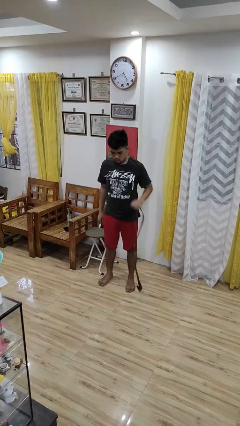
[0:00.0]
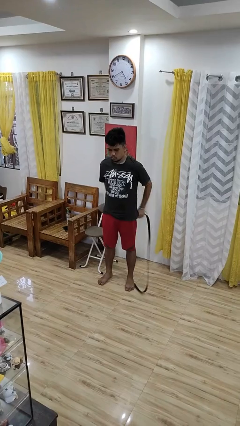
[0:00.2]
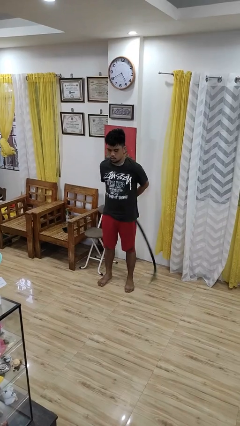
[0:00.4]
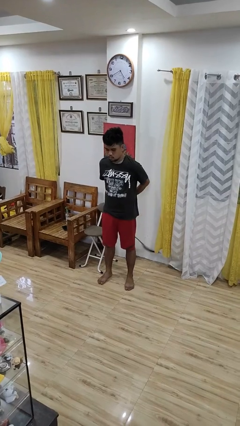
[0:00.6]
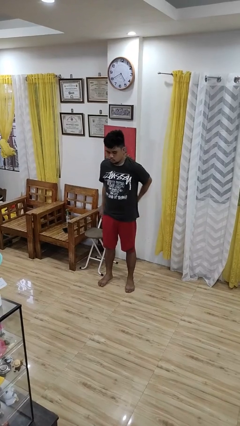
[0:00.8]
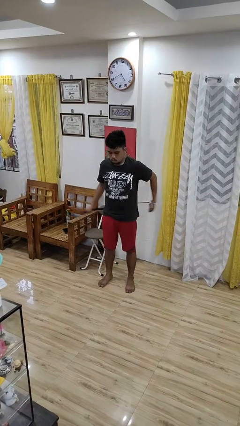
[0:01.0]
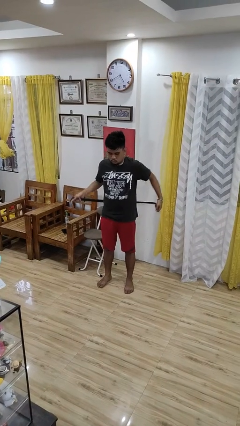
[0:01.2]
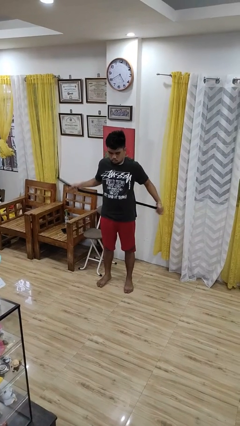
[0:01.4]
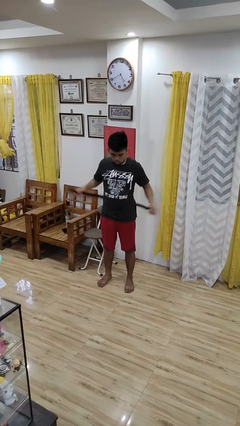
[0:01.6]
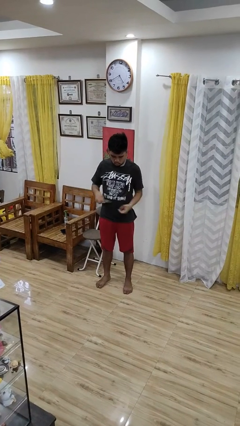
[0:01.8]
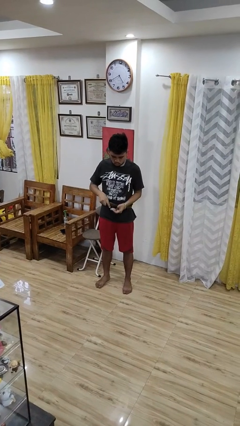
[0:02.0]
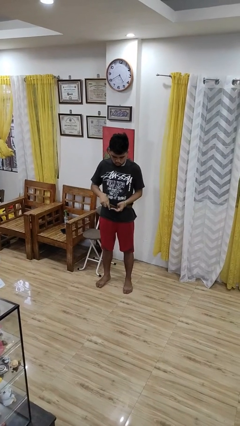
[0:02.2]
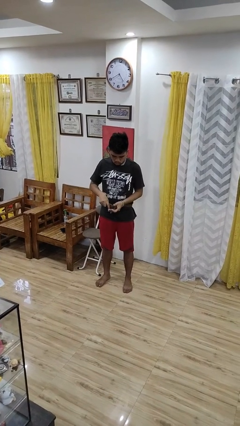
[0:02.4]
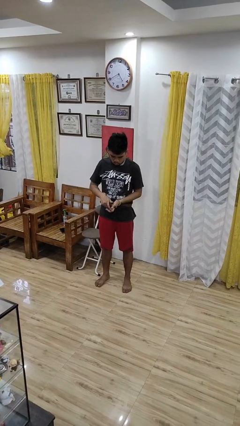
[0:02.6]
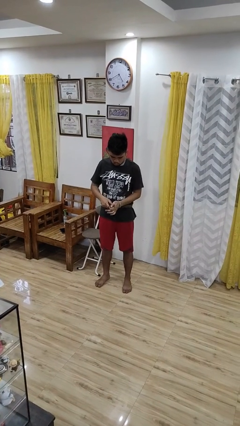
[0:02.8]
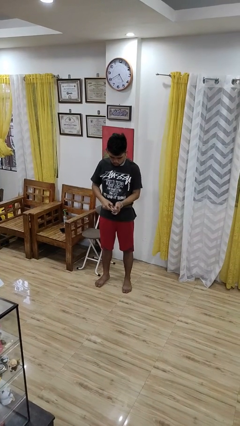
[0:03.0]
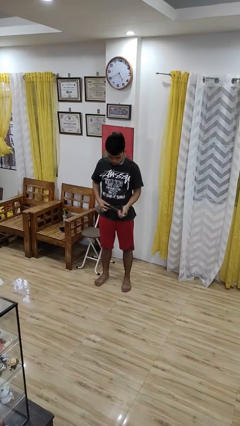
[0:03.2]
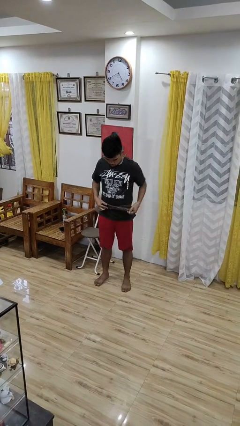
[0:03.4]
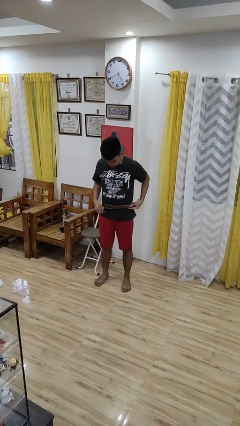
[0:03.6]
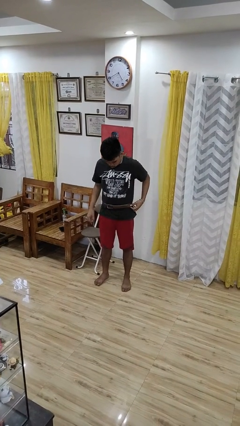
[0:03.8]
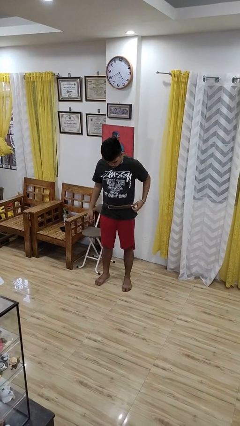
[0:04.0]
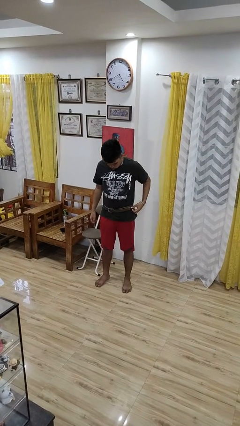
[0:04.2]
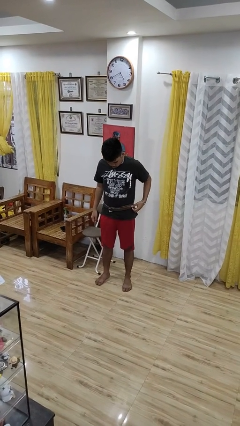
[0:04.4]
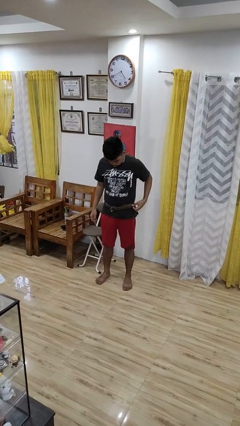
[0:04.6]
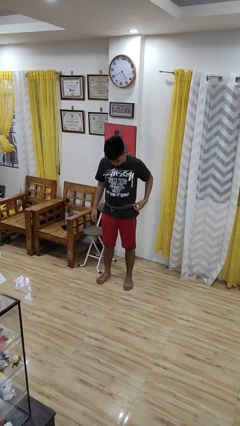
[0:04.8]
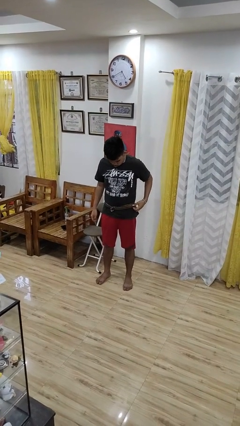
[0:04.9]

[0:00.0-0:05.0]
person puts on belt

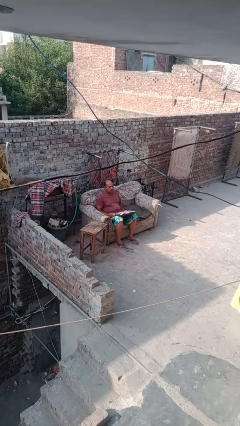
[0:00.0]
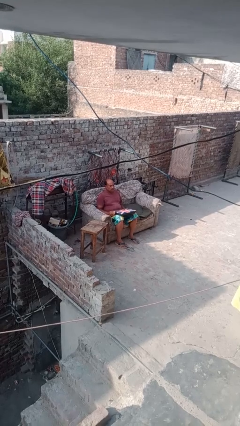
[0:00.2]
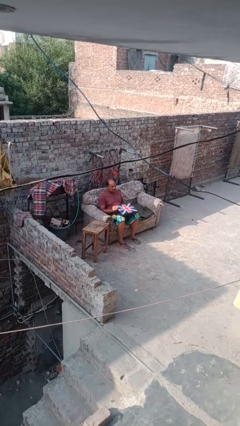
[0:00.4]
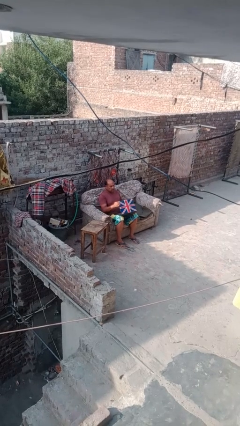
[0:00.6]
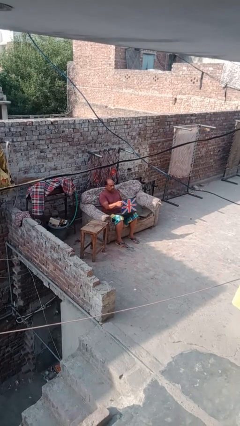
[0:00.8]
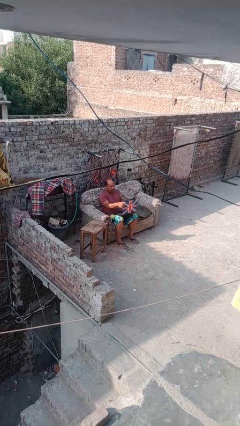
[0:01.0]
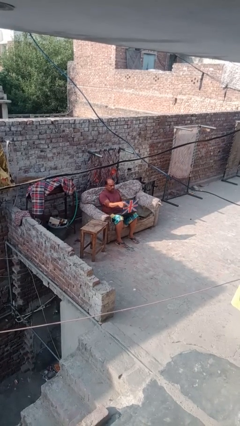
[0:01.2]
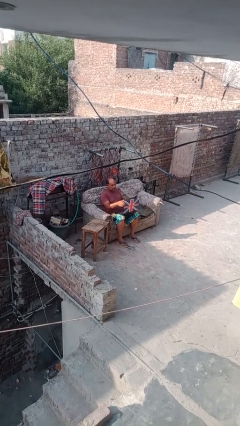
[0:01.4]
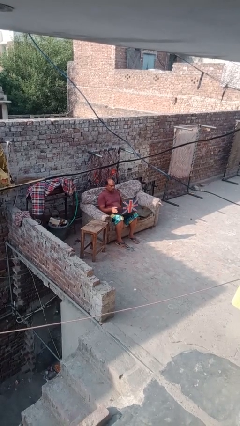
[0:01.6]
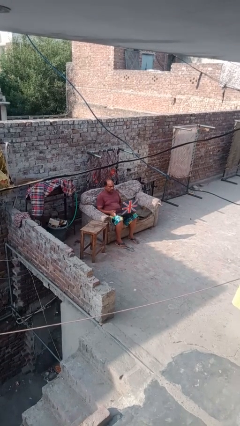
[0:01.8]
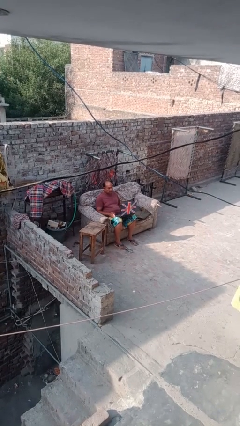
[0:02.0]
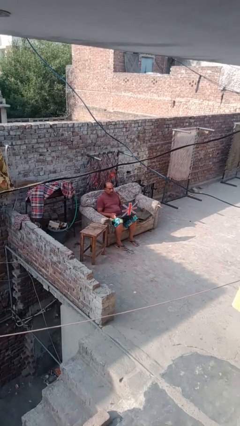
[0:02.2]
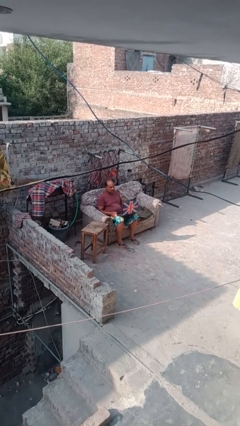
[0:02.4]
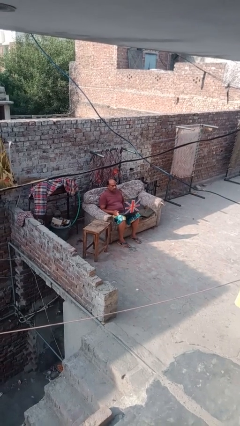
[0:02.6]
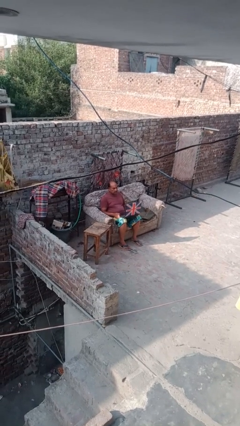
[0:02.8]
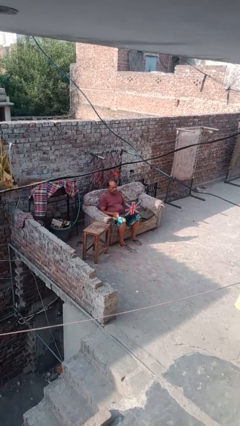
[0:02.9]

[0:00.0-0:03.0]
person opens laptop

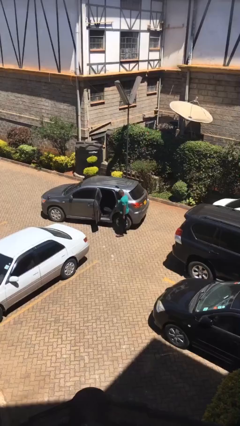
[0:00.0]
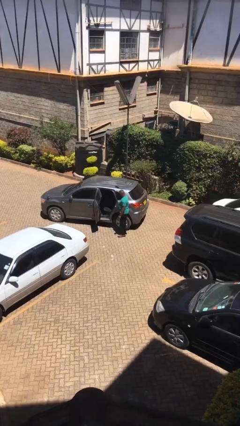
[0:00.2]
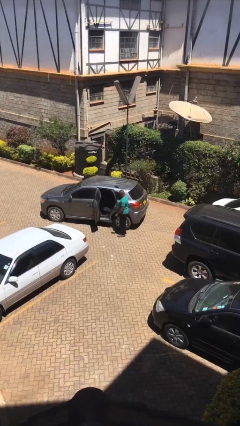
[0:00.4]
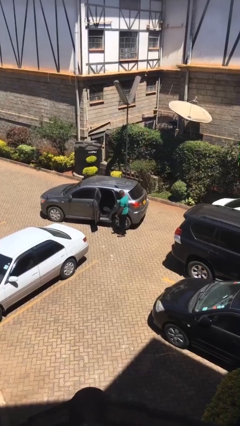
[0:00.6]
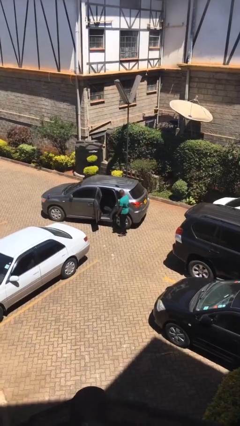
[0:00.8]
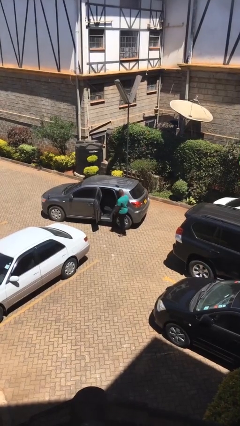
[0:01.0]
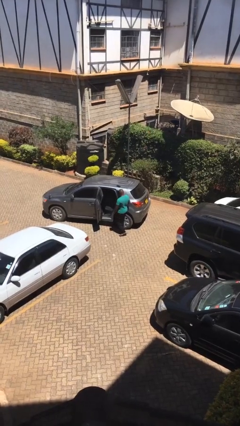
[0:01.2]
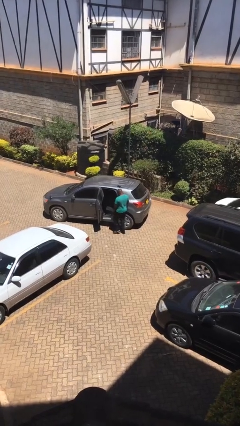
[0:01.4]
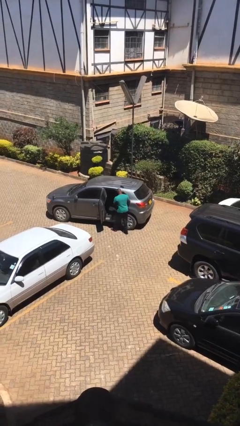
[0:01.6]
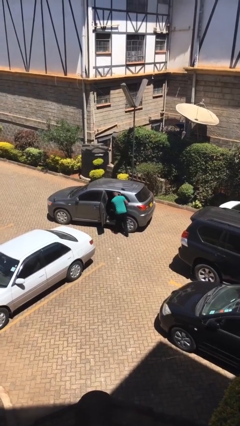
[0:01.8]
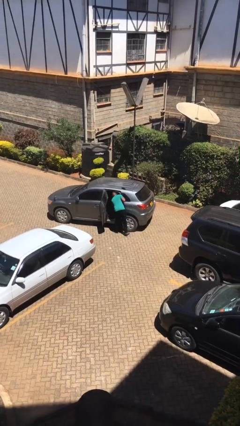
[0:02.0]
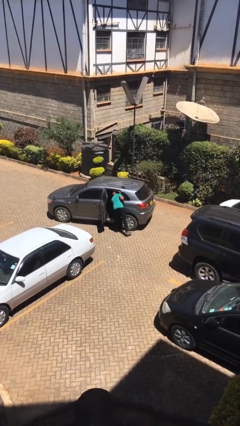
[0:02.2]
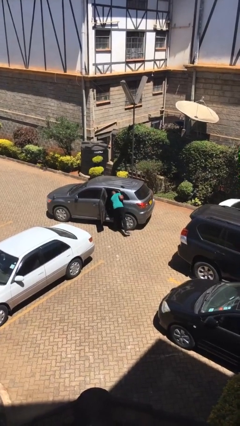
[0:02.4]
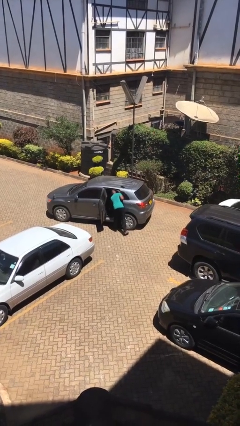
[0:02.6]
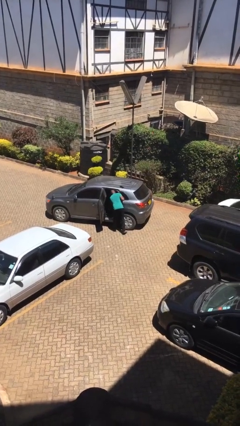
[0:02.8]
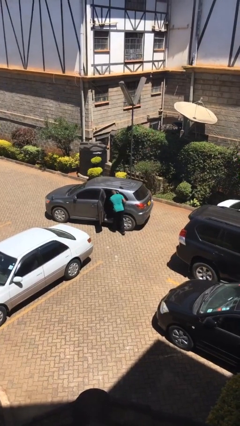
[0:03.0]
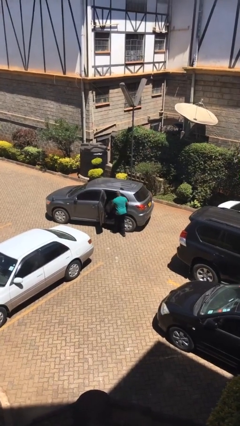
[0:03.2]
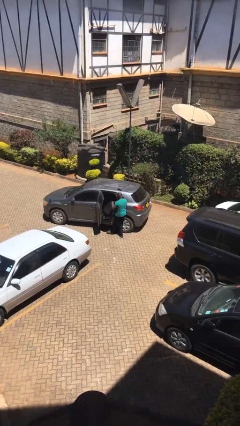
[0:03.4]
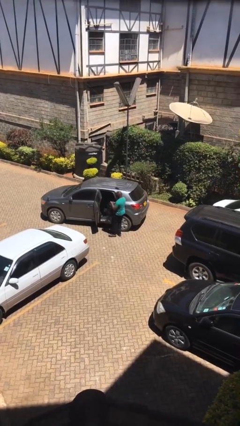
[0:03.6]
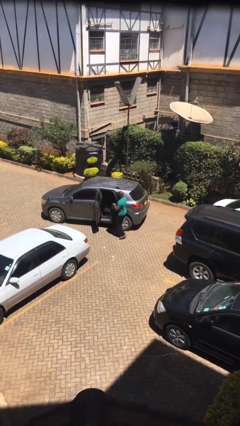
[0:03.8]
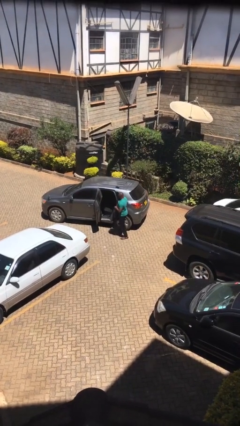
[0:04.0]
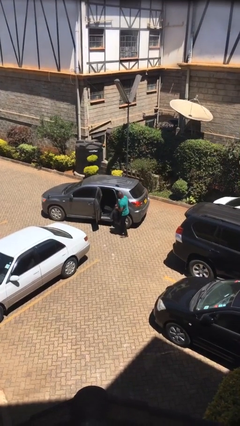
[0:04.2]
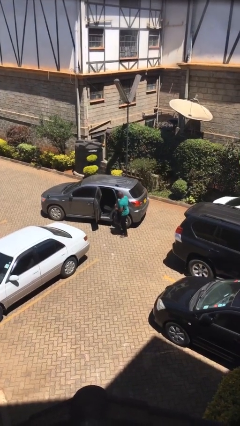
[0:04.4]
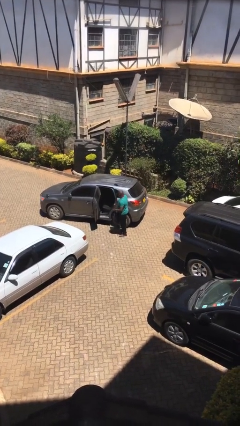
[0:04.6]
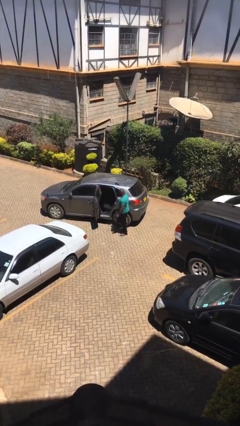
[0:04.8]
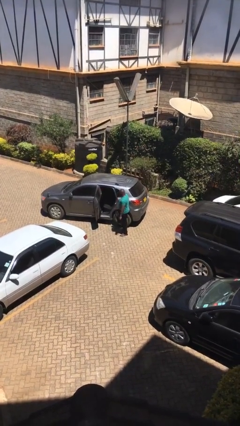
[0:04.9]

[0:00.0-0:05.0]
person unloads car

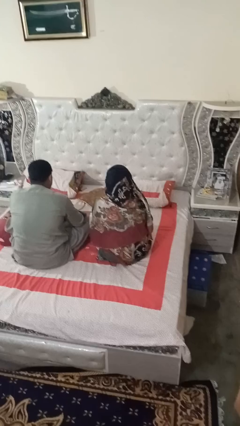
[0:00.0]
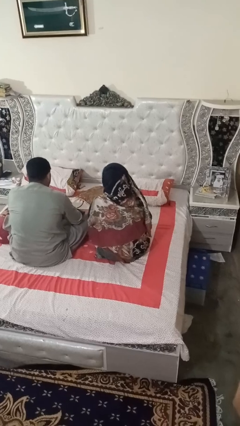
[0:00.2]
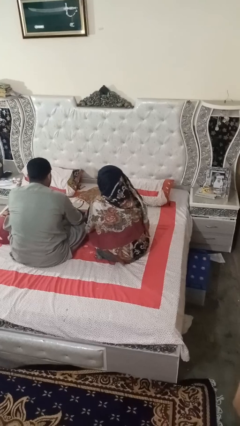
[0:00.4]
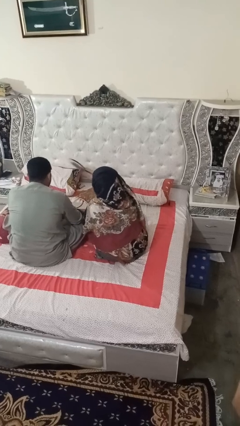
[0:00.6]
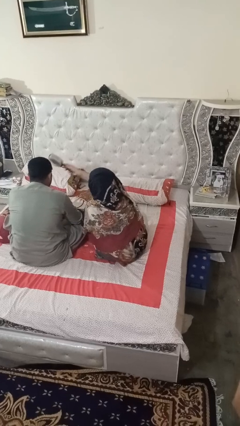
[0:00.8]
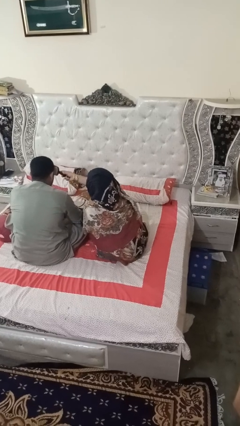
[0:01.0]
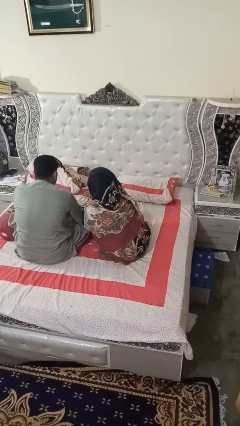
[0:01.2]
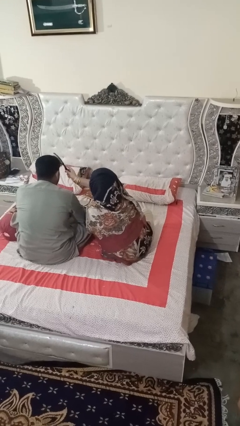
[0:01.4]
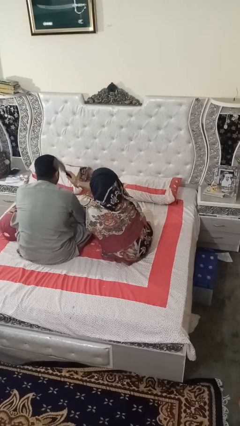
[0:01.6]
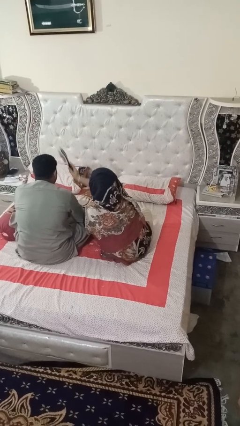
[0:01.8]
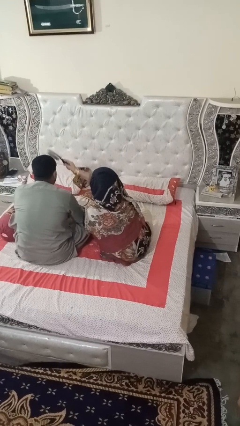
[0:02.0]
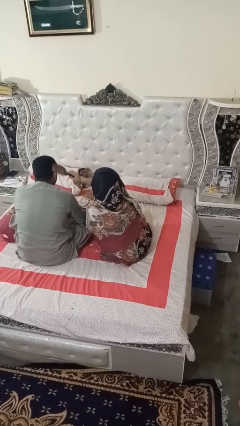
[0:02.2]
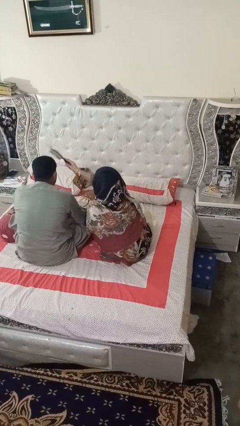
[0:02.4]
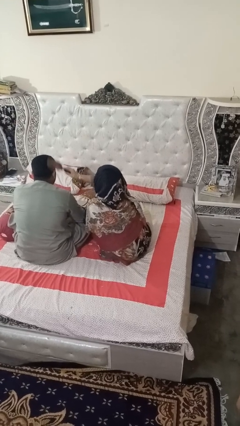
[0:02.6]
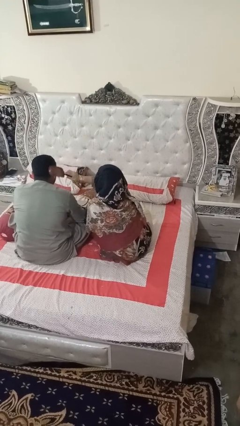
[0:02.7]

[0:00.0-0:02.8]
person brushes hair of person

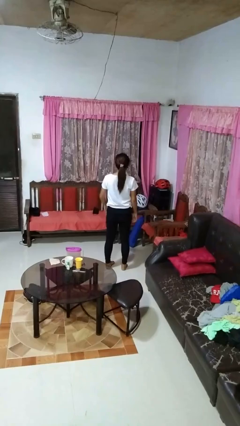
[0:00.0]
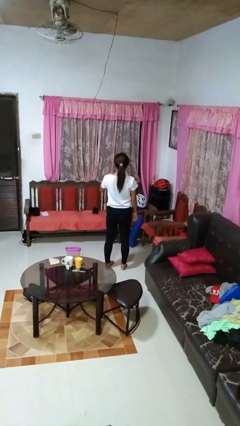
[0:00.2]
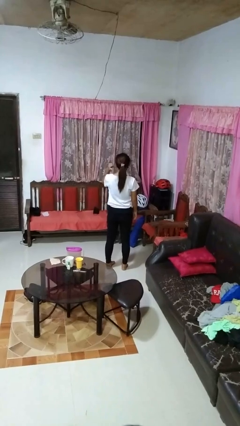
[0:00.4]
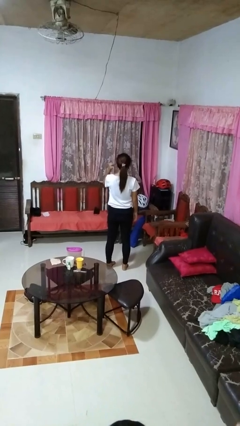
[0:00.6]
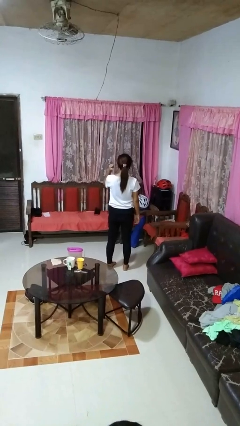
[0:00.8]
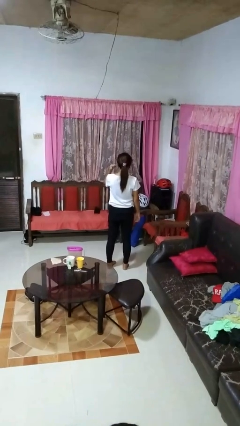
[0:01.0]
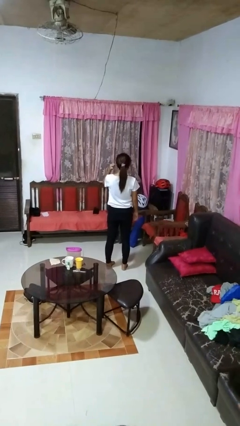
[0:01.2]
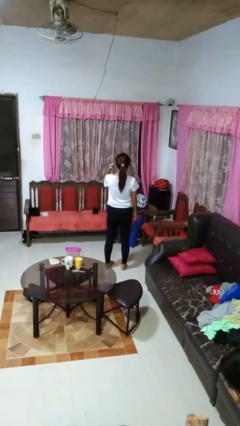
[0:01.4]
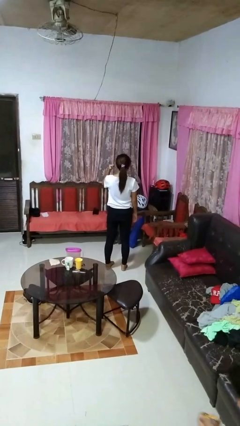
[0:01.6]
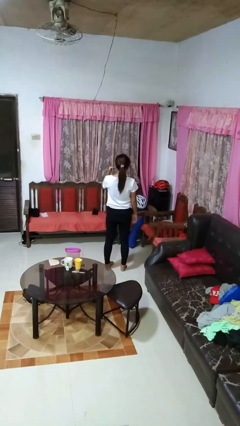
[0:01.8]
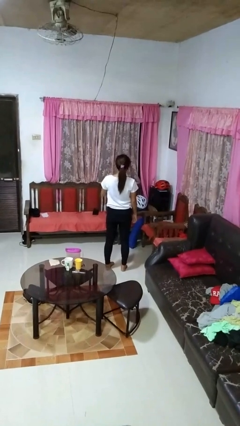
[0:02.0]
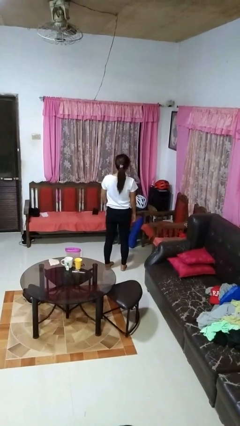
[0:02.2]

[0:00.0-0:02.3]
person gestures behind me
